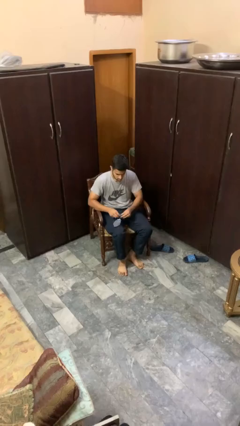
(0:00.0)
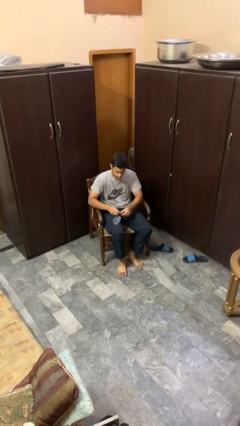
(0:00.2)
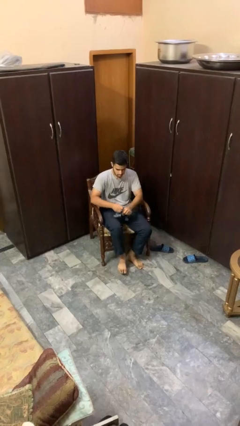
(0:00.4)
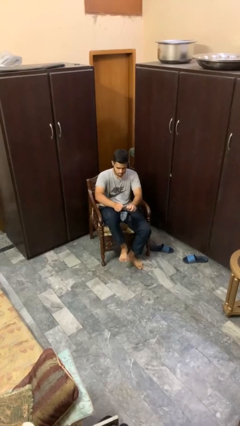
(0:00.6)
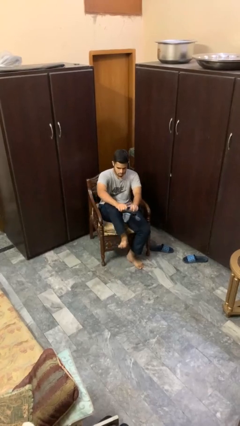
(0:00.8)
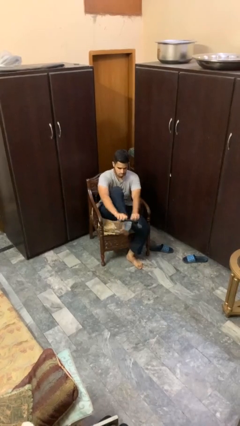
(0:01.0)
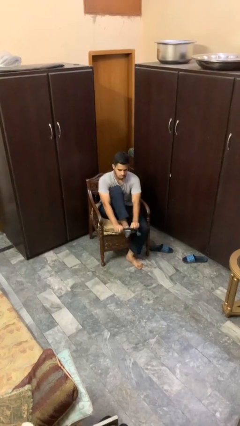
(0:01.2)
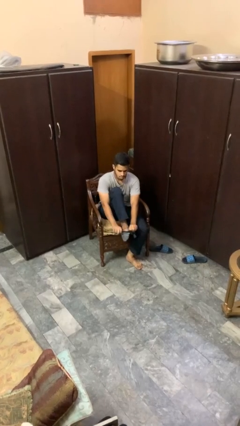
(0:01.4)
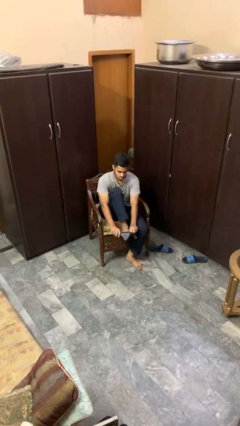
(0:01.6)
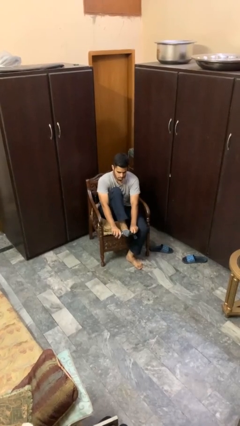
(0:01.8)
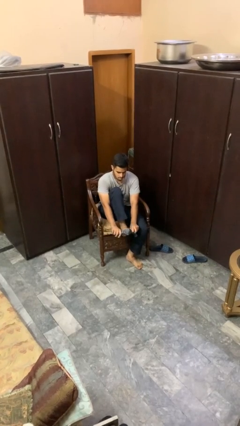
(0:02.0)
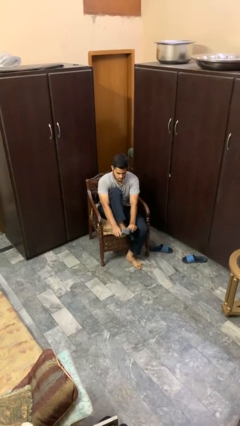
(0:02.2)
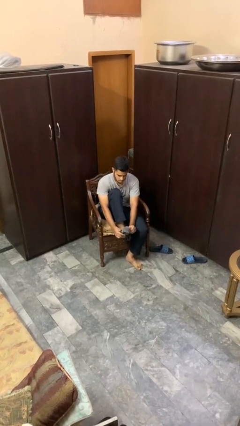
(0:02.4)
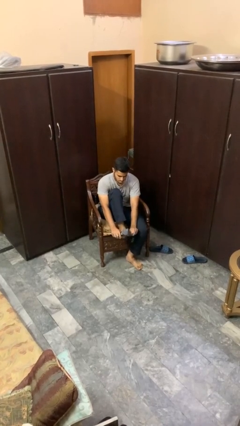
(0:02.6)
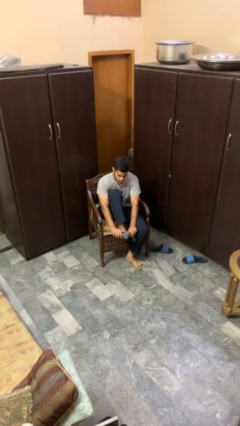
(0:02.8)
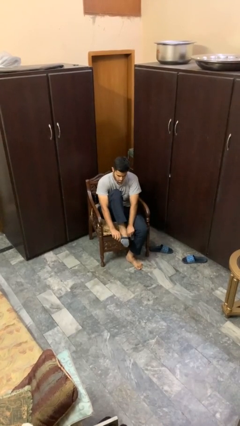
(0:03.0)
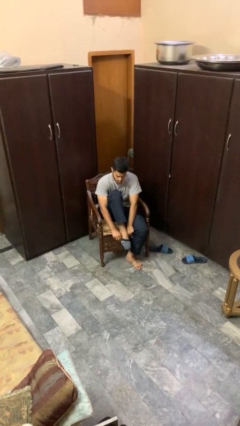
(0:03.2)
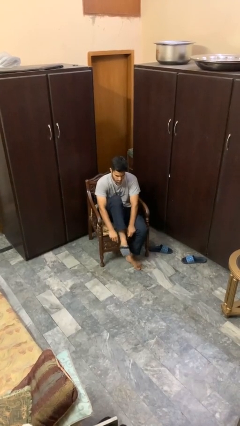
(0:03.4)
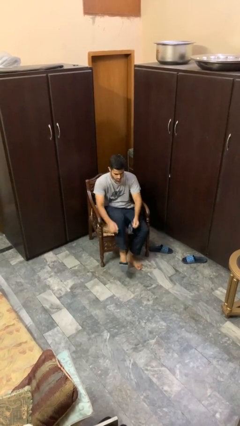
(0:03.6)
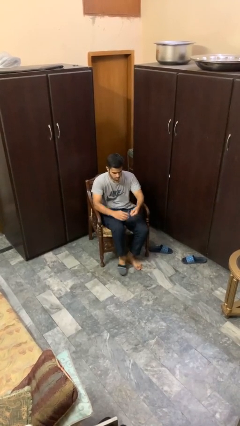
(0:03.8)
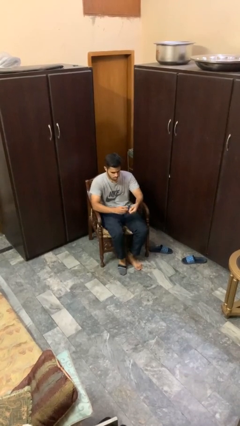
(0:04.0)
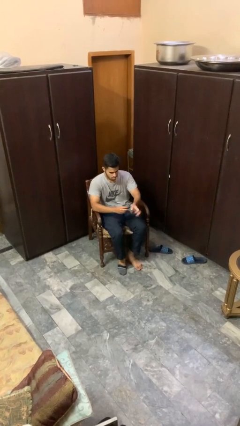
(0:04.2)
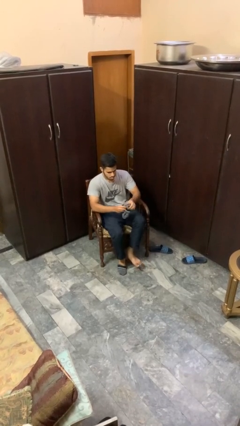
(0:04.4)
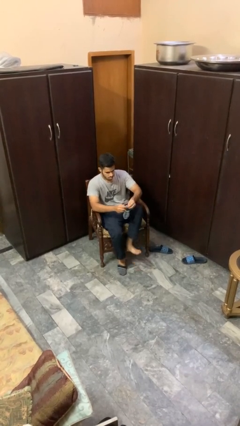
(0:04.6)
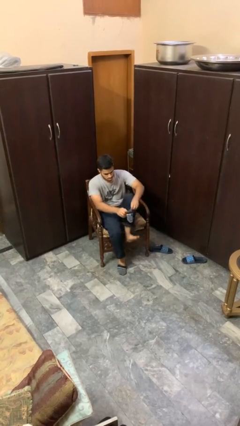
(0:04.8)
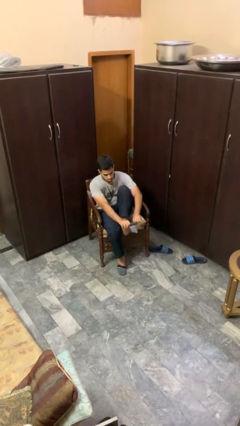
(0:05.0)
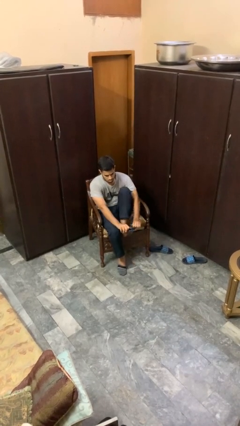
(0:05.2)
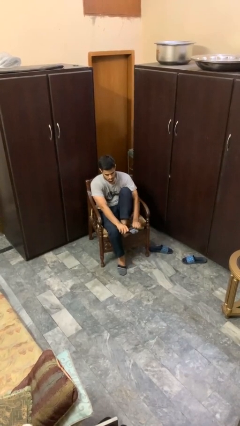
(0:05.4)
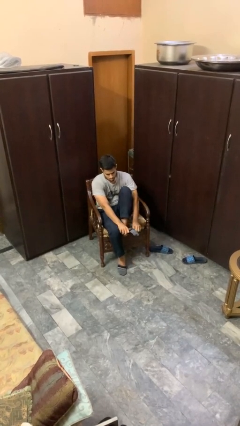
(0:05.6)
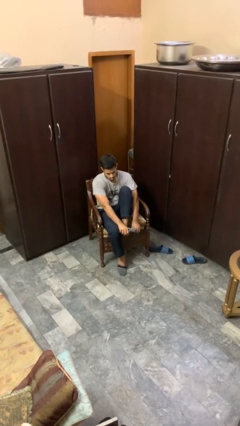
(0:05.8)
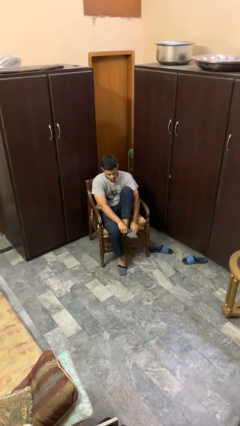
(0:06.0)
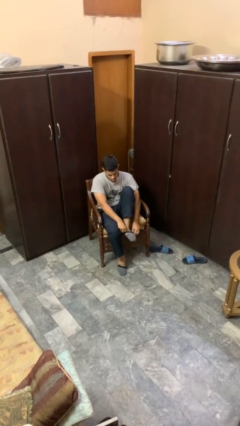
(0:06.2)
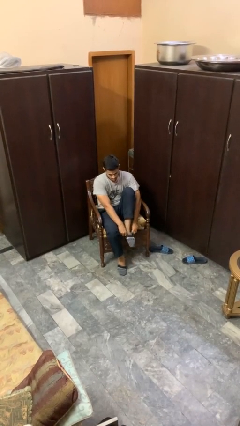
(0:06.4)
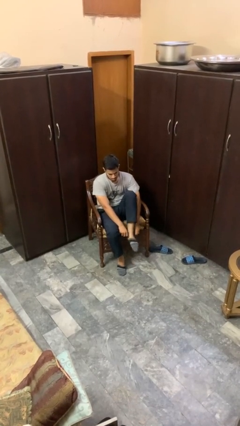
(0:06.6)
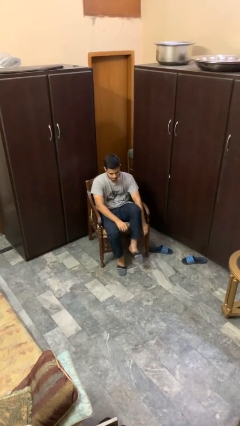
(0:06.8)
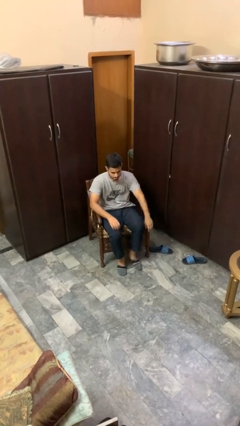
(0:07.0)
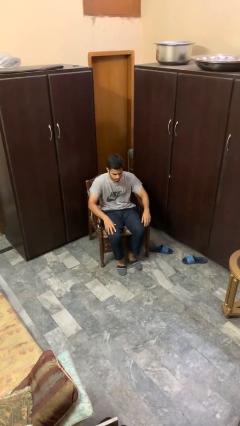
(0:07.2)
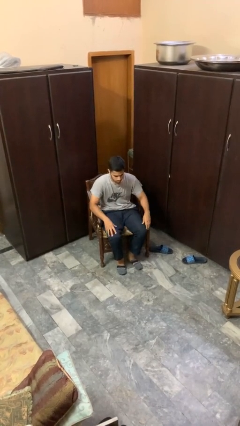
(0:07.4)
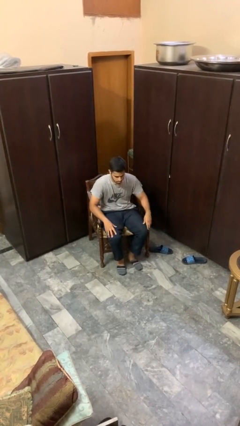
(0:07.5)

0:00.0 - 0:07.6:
person puts on socks

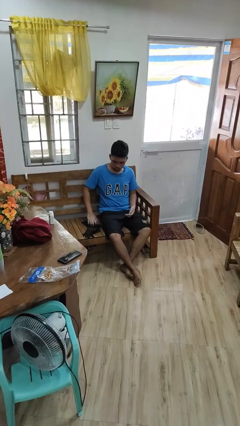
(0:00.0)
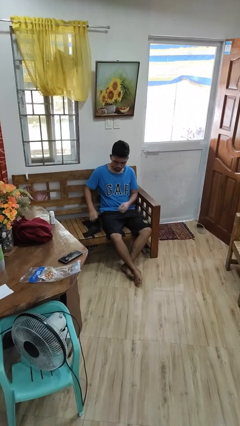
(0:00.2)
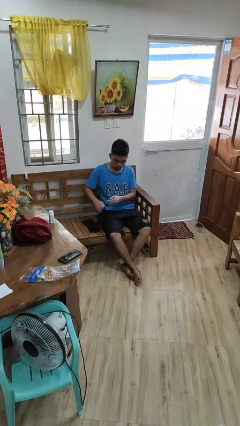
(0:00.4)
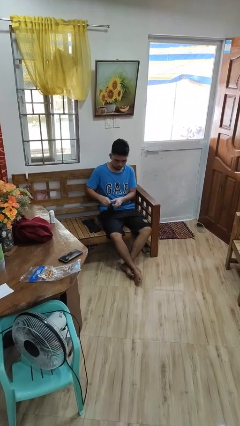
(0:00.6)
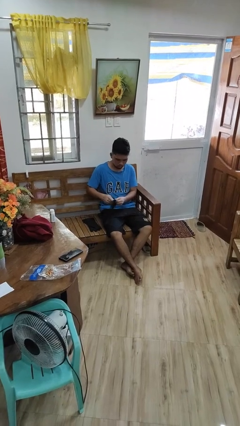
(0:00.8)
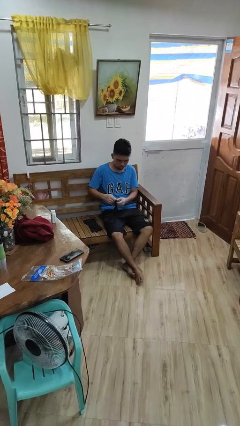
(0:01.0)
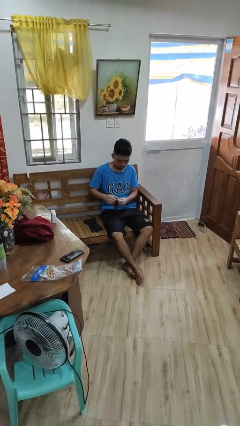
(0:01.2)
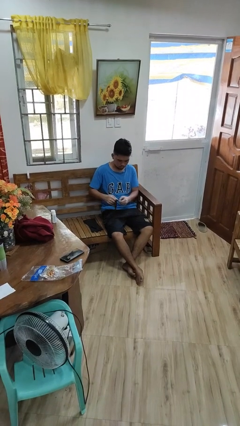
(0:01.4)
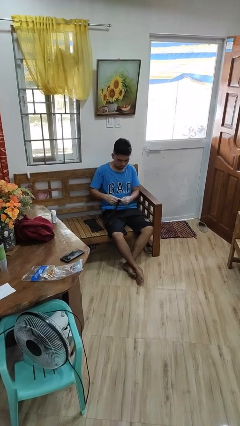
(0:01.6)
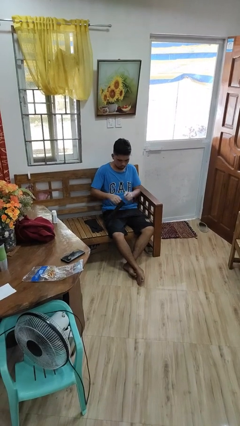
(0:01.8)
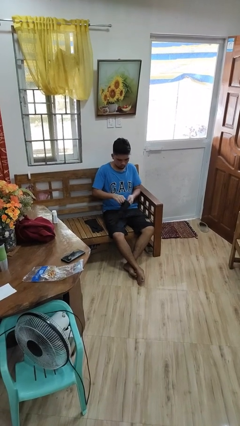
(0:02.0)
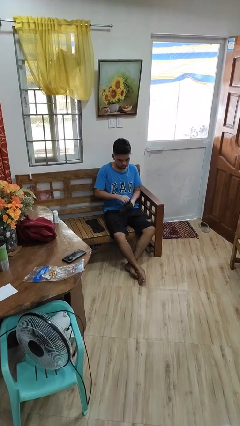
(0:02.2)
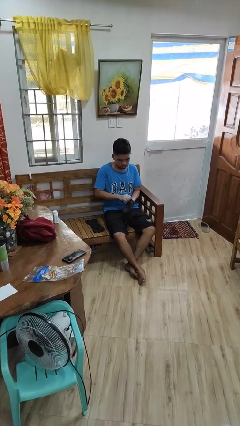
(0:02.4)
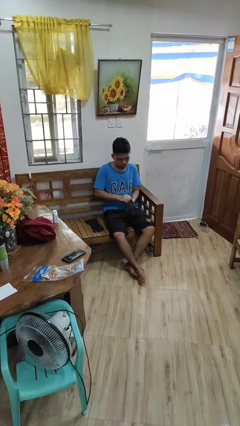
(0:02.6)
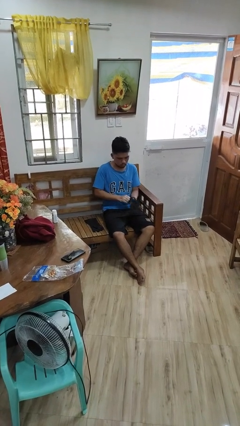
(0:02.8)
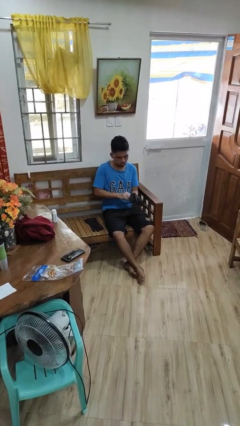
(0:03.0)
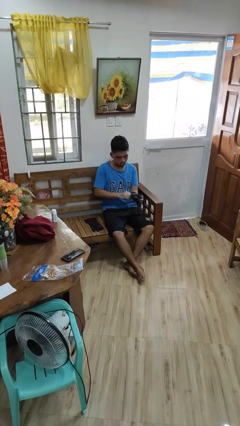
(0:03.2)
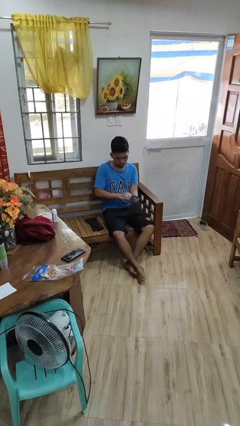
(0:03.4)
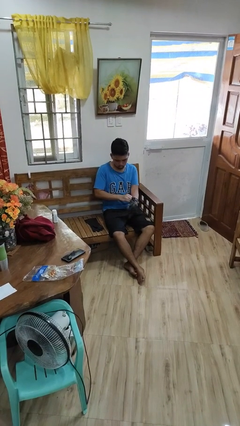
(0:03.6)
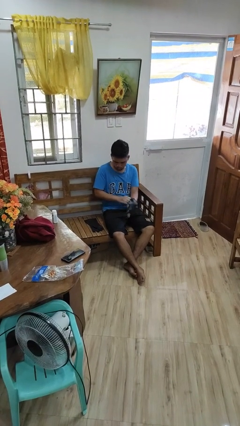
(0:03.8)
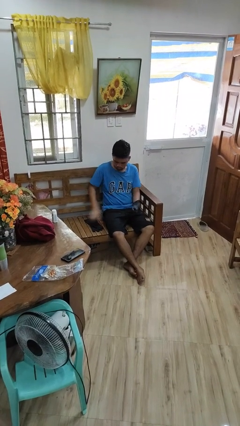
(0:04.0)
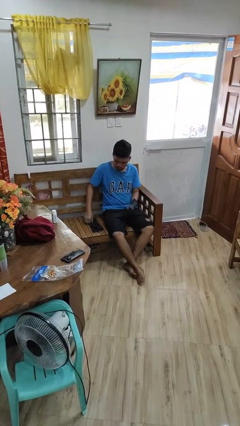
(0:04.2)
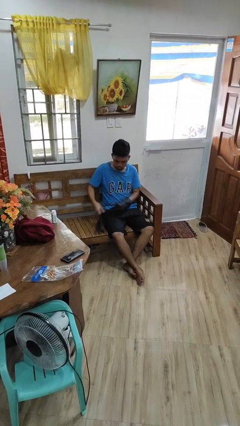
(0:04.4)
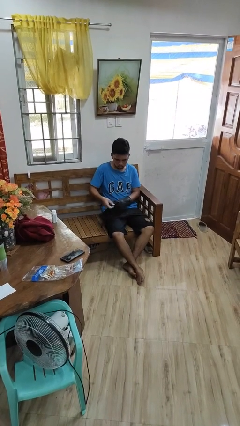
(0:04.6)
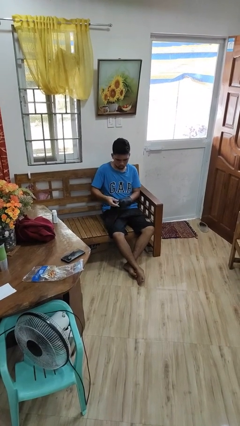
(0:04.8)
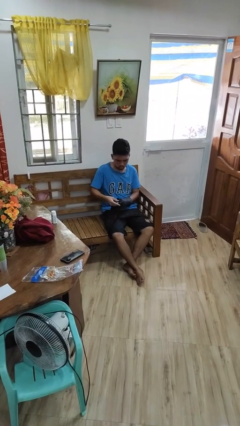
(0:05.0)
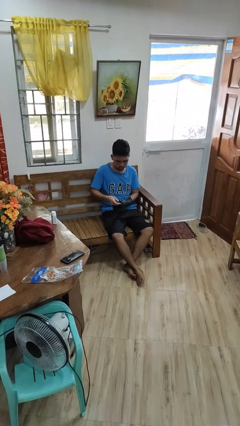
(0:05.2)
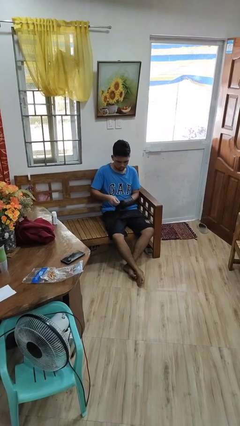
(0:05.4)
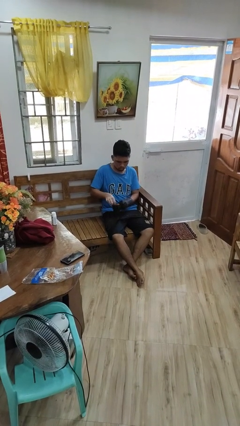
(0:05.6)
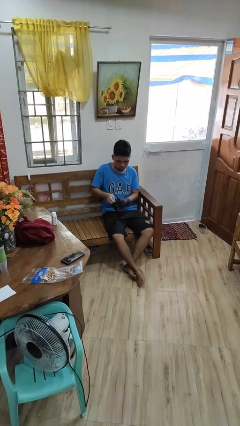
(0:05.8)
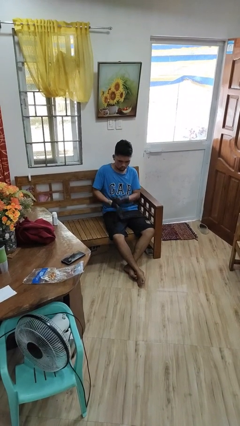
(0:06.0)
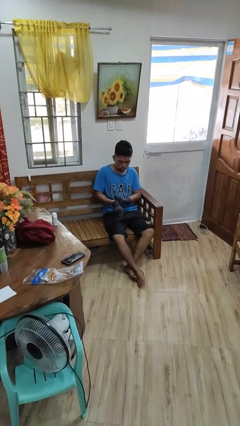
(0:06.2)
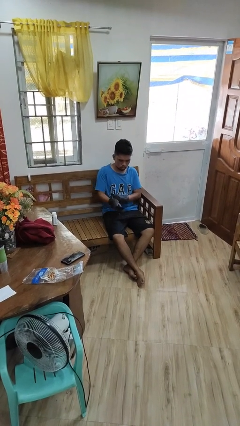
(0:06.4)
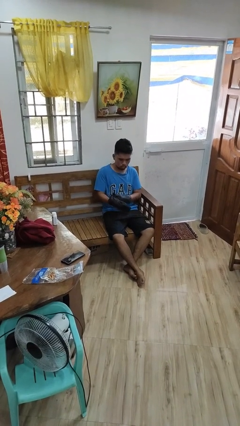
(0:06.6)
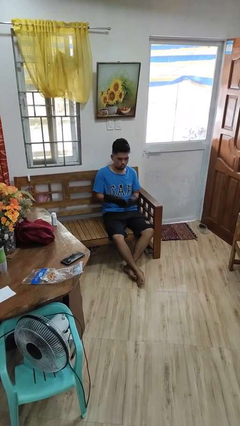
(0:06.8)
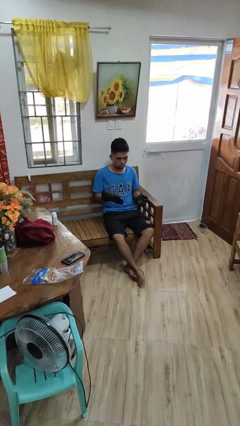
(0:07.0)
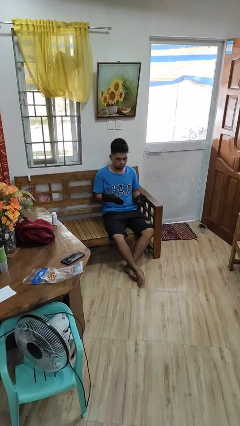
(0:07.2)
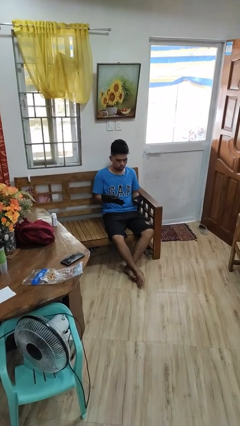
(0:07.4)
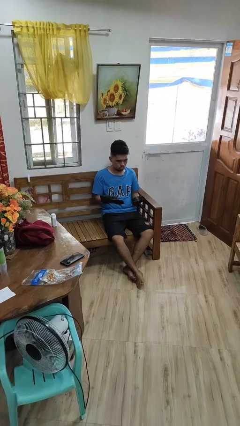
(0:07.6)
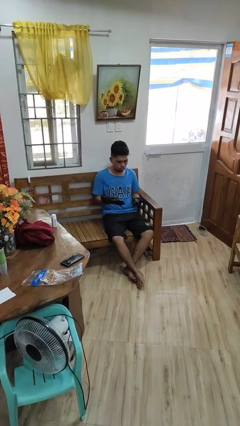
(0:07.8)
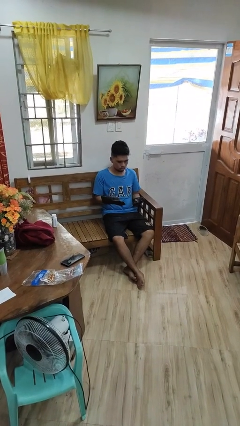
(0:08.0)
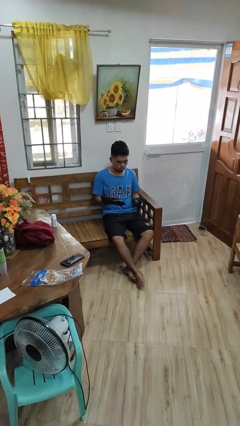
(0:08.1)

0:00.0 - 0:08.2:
person puts on gloves

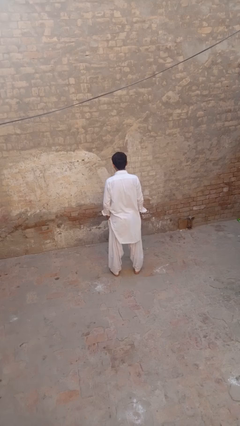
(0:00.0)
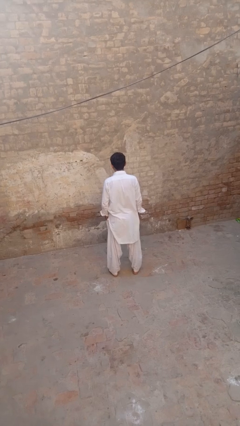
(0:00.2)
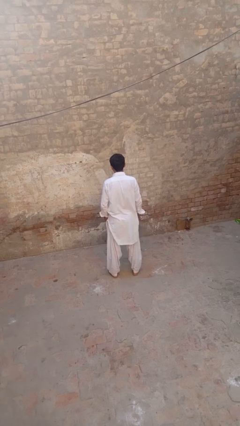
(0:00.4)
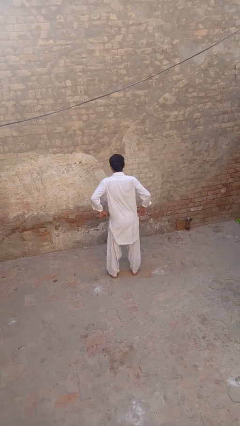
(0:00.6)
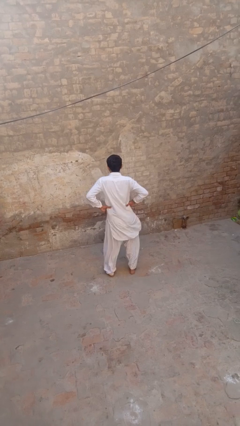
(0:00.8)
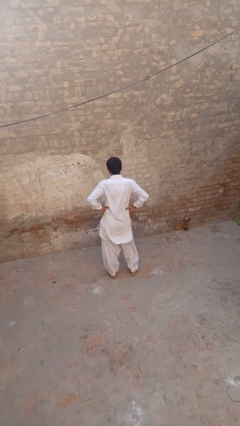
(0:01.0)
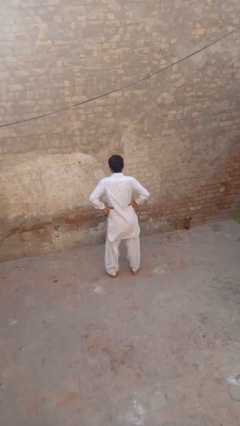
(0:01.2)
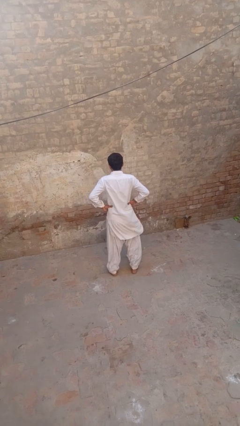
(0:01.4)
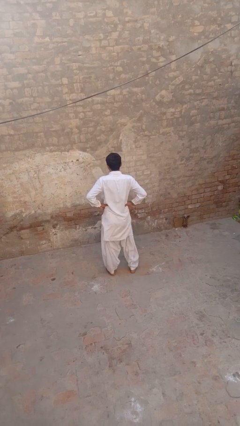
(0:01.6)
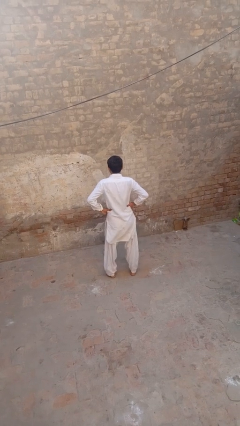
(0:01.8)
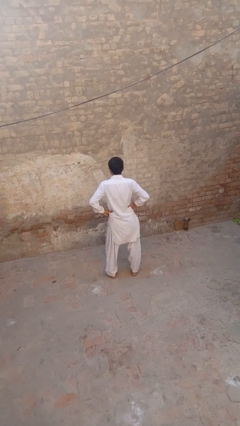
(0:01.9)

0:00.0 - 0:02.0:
person wiggles hips
